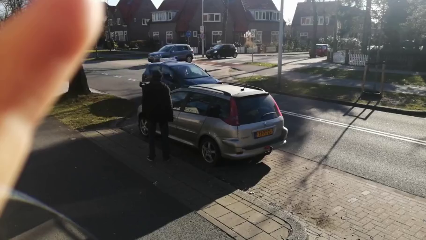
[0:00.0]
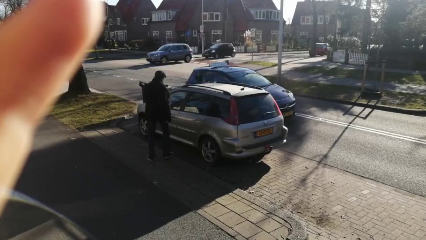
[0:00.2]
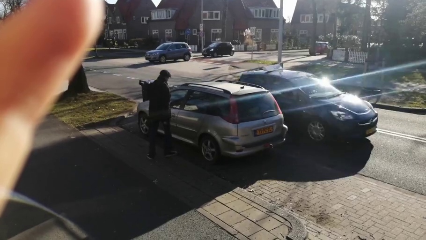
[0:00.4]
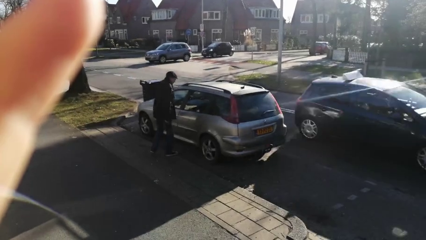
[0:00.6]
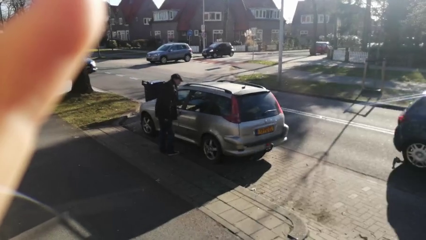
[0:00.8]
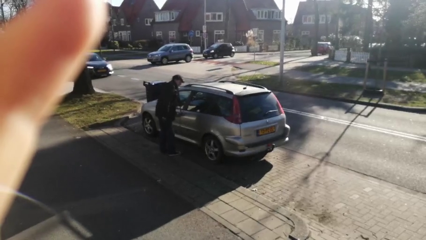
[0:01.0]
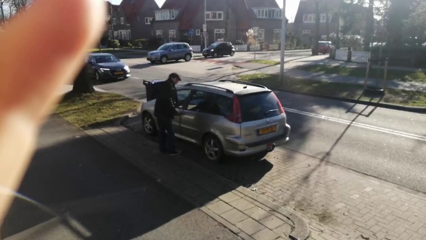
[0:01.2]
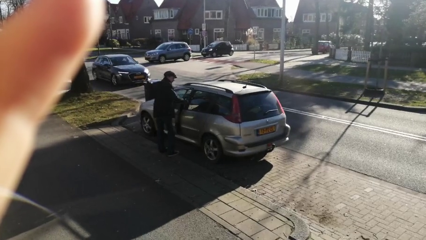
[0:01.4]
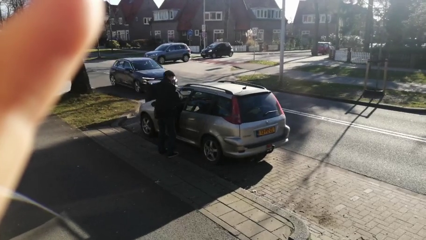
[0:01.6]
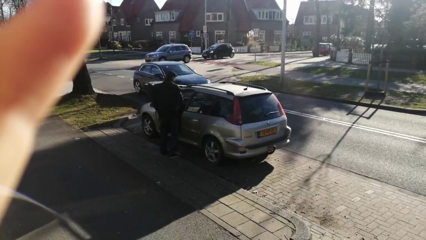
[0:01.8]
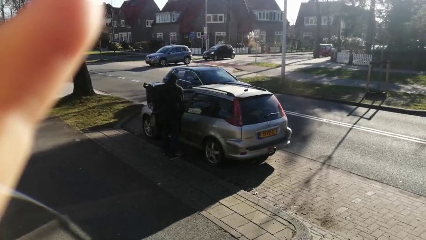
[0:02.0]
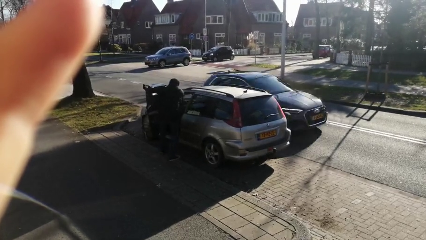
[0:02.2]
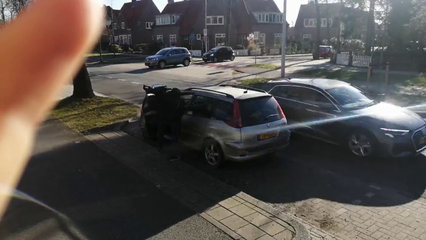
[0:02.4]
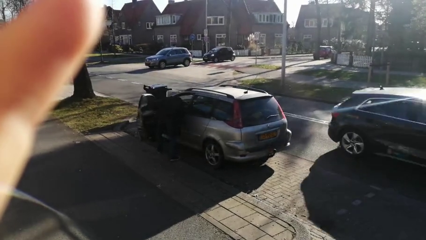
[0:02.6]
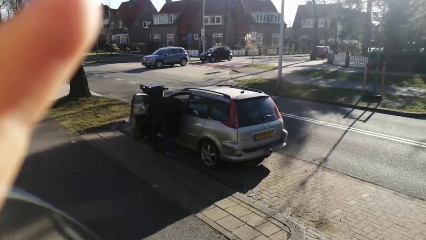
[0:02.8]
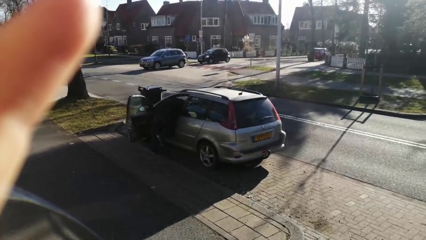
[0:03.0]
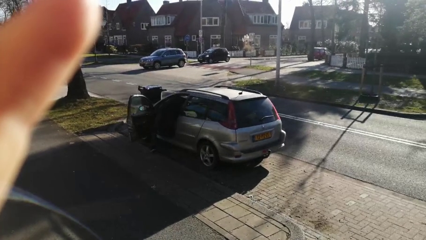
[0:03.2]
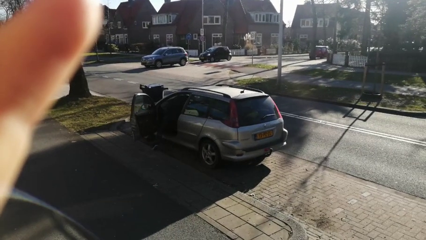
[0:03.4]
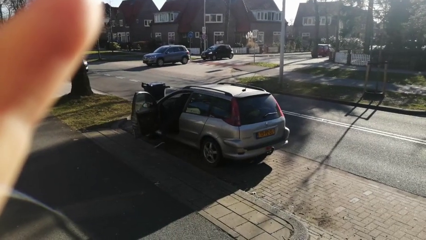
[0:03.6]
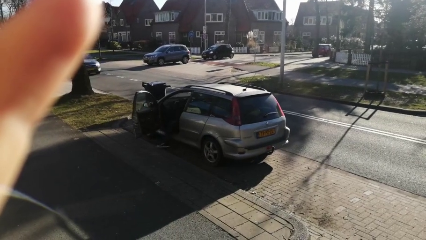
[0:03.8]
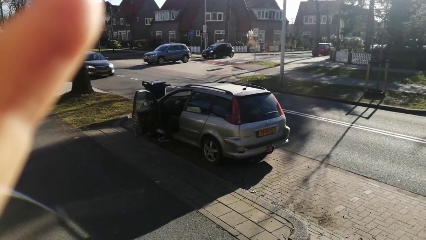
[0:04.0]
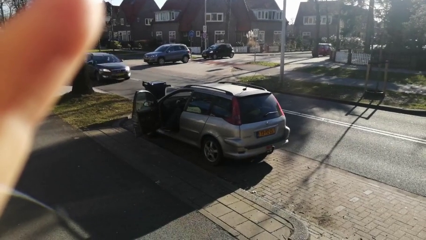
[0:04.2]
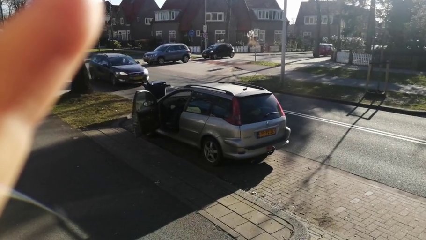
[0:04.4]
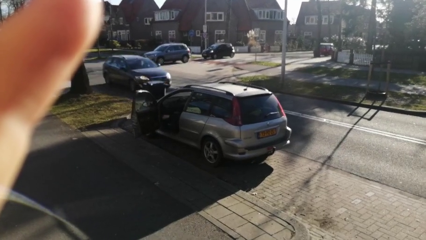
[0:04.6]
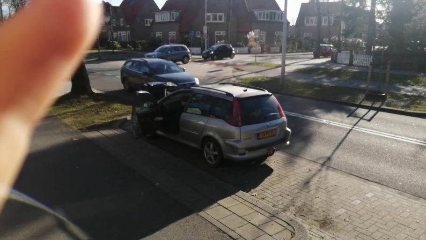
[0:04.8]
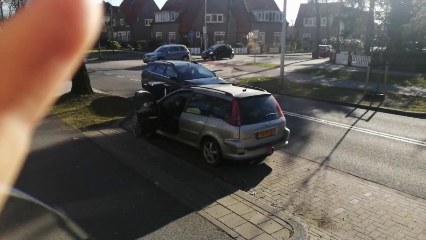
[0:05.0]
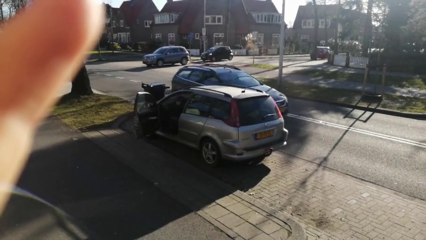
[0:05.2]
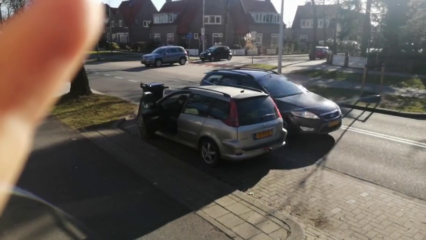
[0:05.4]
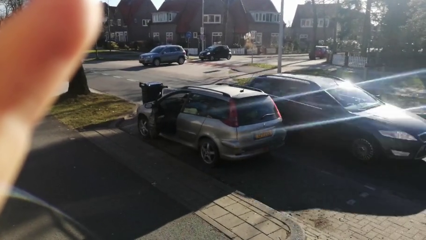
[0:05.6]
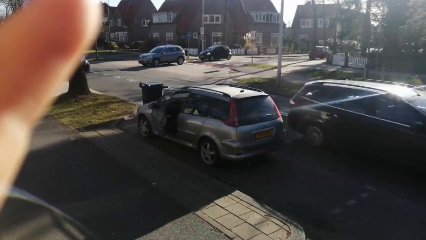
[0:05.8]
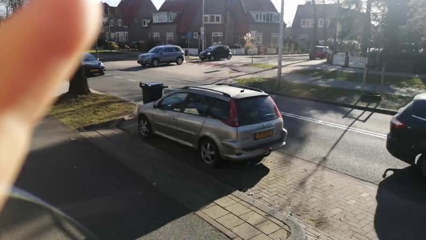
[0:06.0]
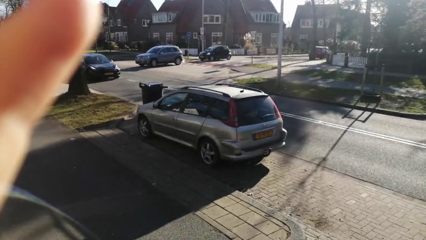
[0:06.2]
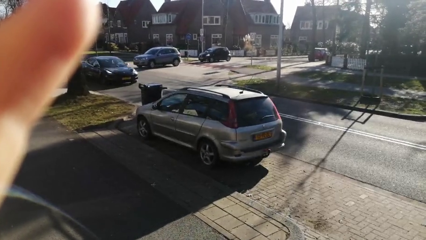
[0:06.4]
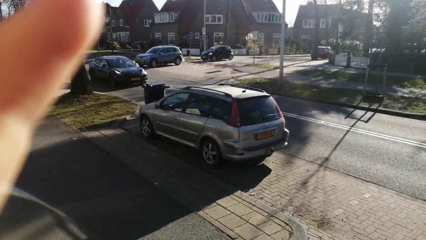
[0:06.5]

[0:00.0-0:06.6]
car picks up person

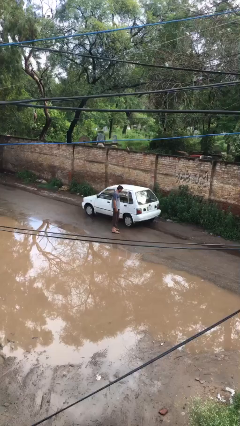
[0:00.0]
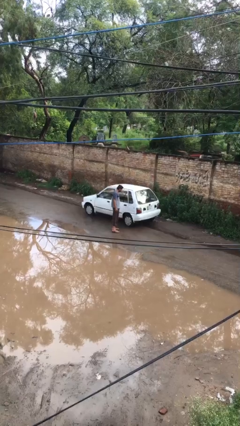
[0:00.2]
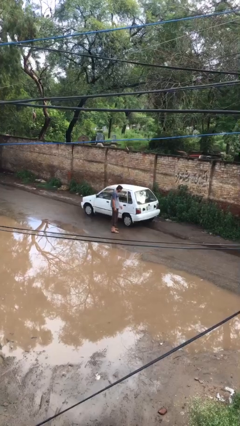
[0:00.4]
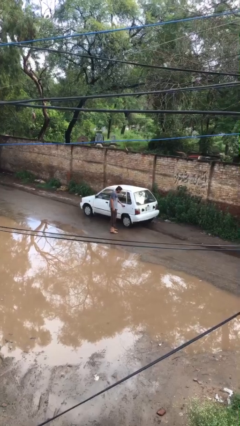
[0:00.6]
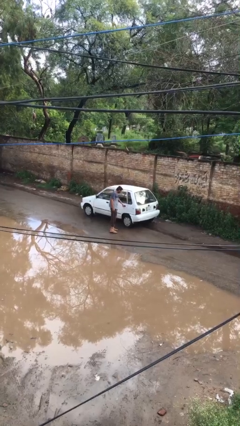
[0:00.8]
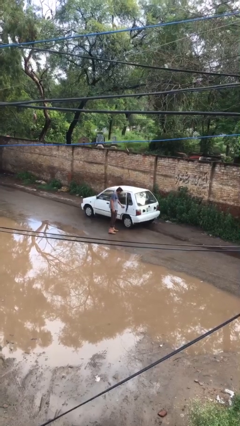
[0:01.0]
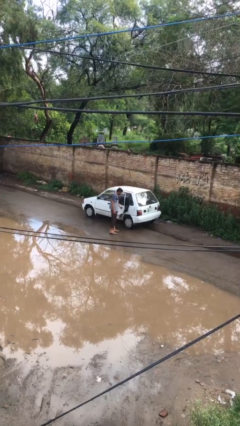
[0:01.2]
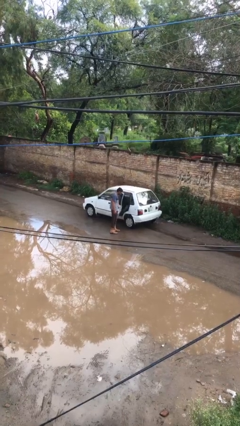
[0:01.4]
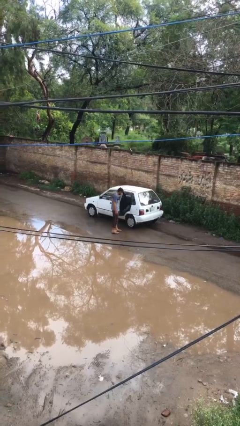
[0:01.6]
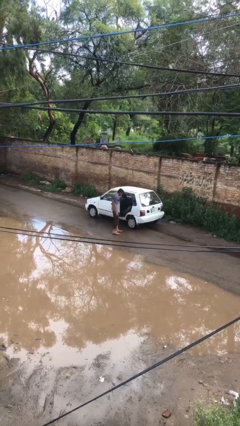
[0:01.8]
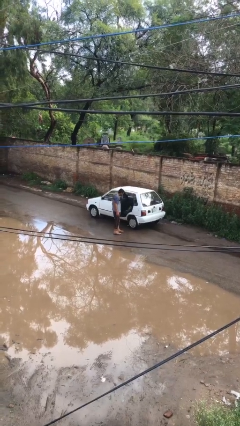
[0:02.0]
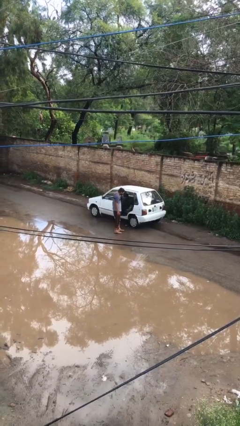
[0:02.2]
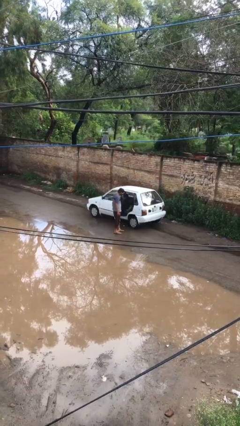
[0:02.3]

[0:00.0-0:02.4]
person opens car door

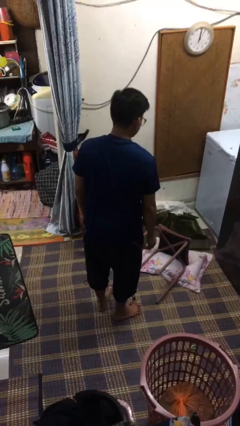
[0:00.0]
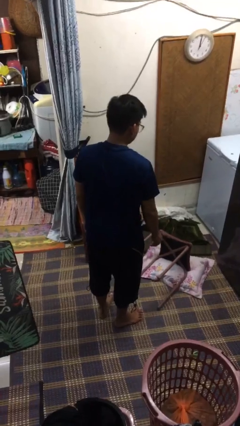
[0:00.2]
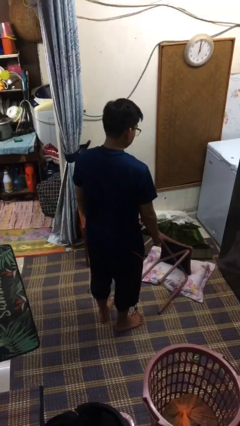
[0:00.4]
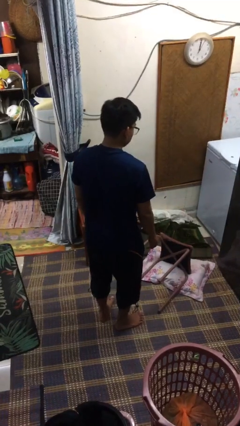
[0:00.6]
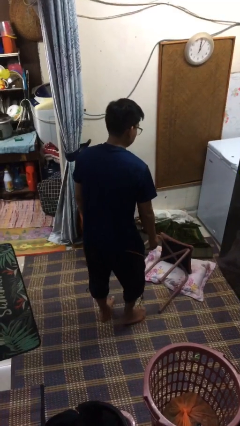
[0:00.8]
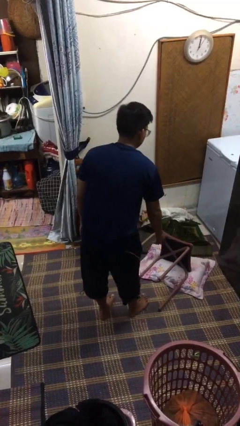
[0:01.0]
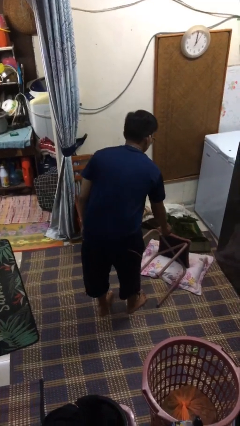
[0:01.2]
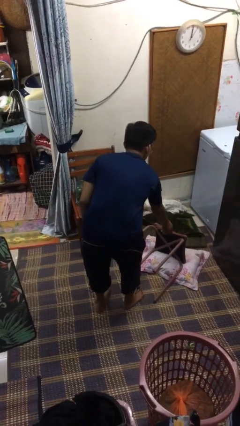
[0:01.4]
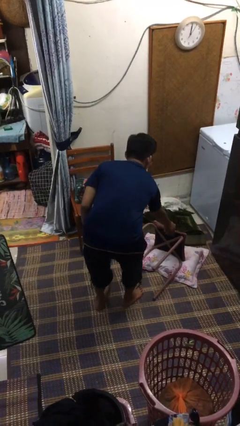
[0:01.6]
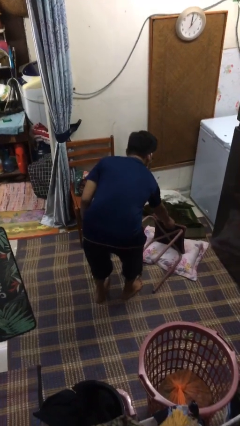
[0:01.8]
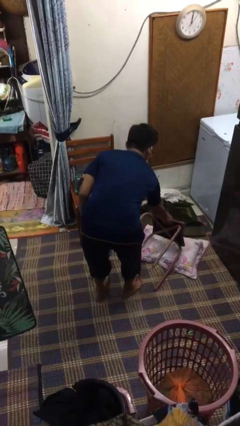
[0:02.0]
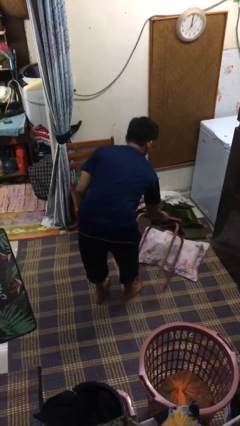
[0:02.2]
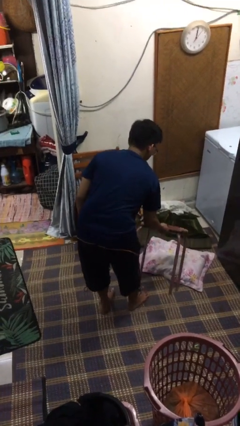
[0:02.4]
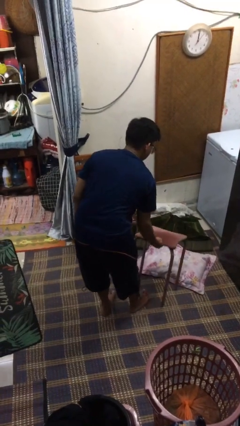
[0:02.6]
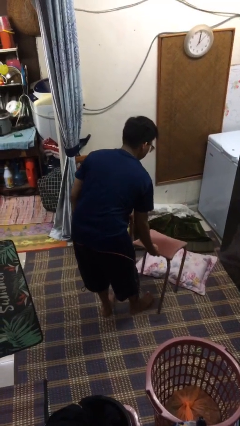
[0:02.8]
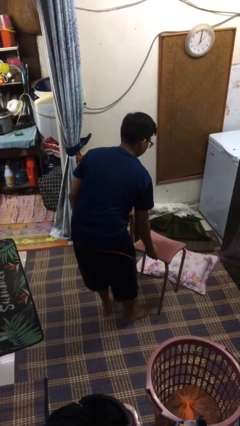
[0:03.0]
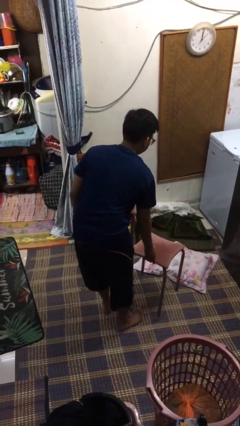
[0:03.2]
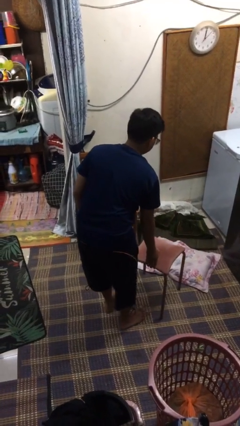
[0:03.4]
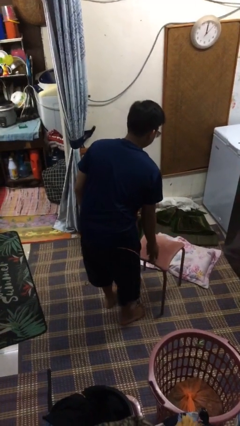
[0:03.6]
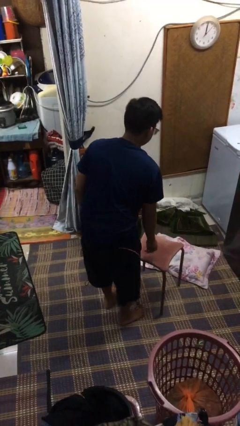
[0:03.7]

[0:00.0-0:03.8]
person sets upright furniture

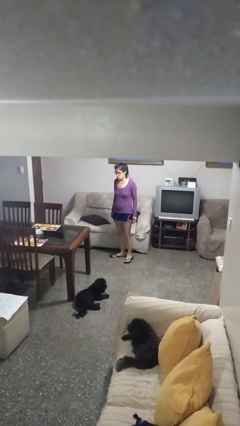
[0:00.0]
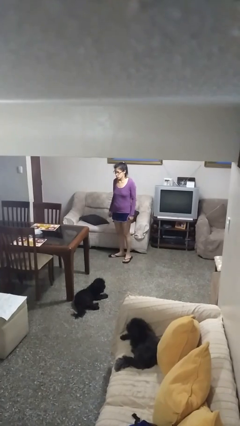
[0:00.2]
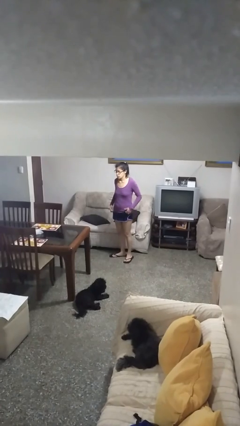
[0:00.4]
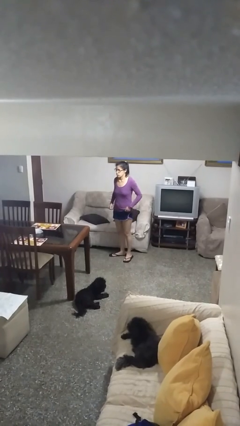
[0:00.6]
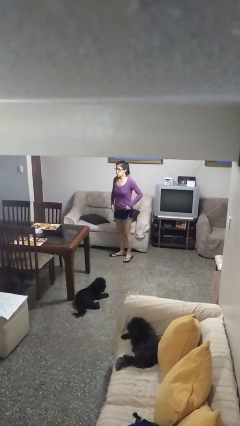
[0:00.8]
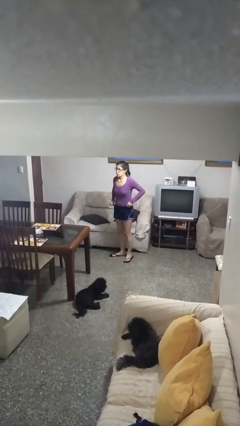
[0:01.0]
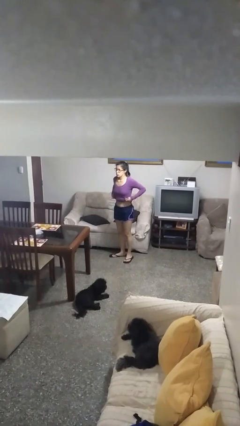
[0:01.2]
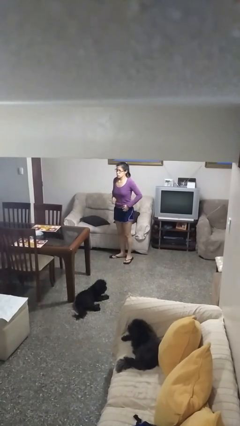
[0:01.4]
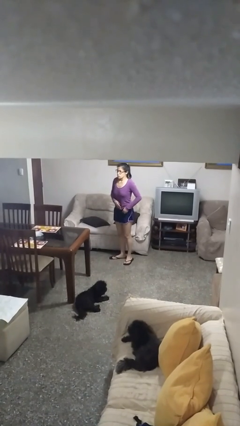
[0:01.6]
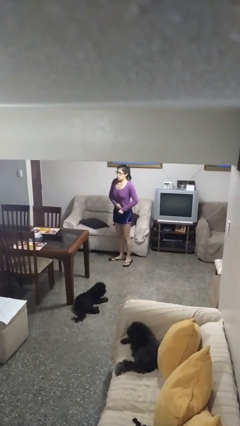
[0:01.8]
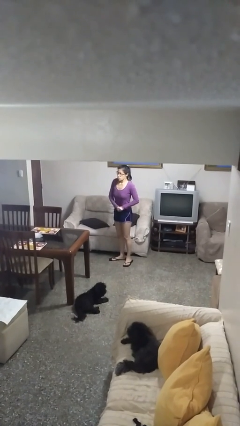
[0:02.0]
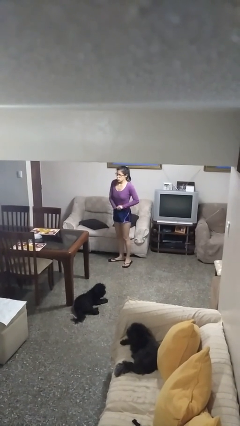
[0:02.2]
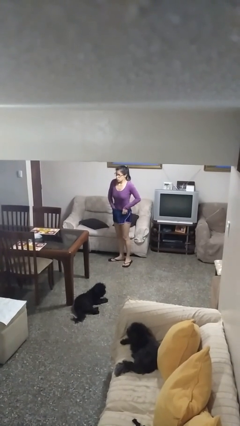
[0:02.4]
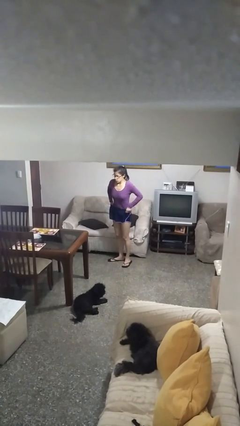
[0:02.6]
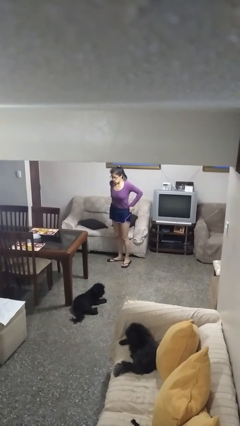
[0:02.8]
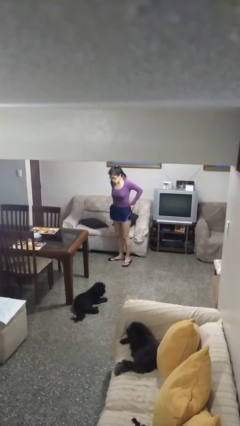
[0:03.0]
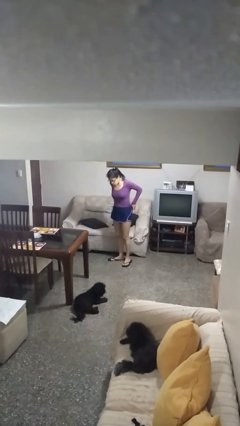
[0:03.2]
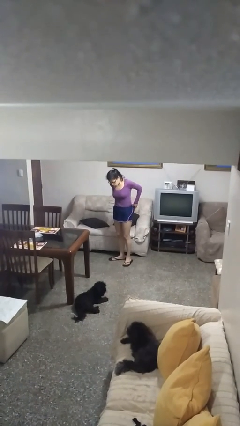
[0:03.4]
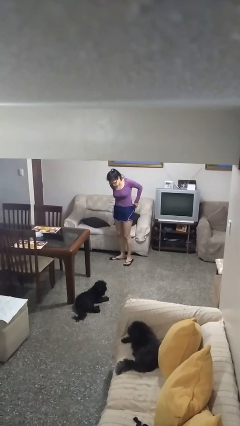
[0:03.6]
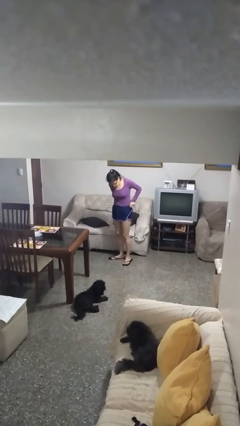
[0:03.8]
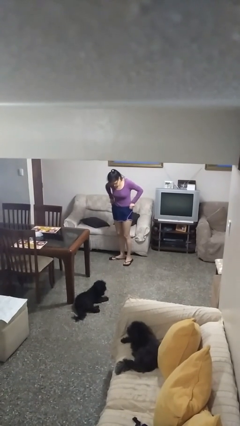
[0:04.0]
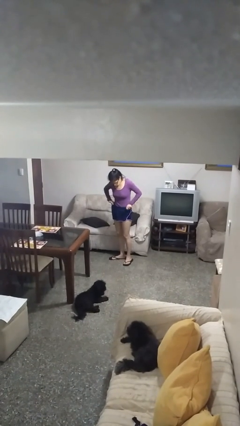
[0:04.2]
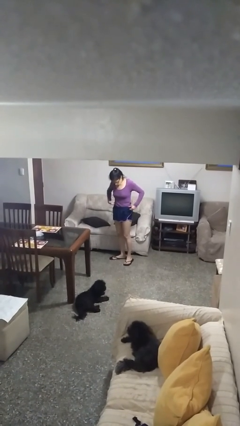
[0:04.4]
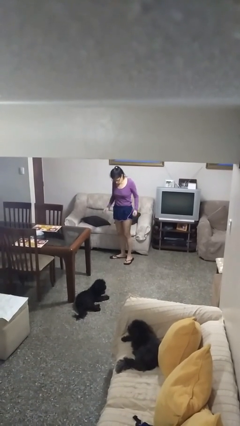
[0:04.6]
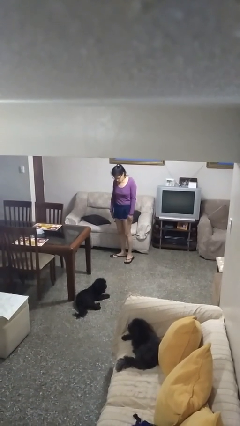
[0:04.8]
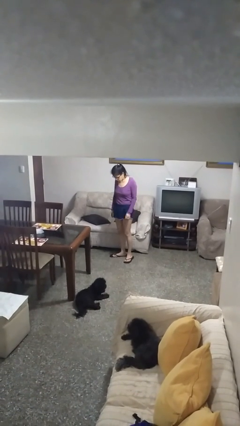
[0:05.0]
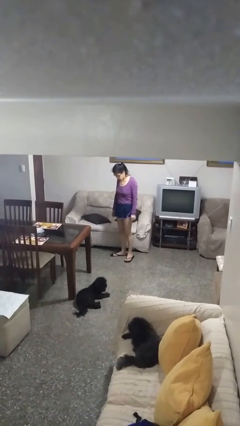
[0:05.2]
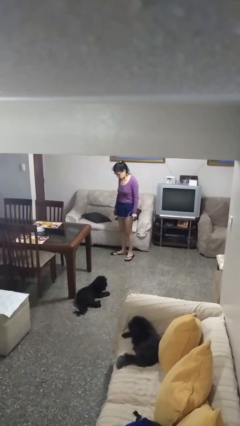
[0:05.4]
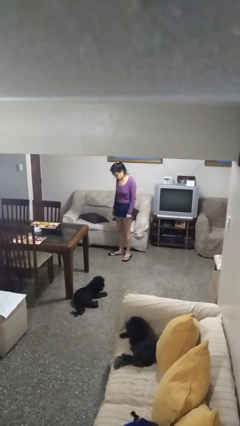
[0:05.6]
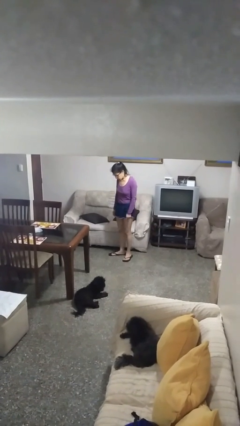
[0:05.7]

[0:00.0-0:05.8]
person tucks in shirt
